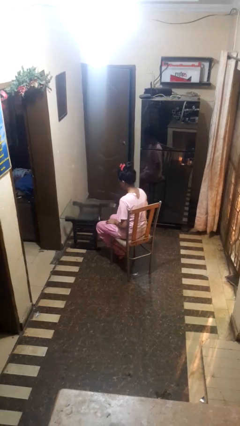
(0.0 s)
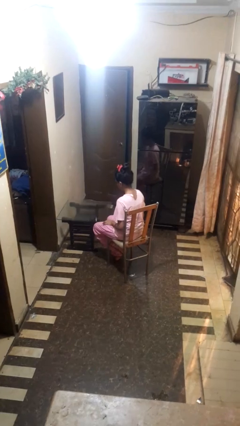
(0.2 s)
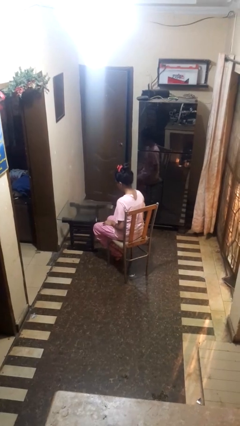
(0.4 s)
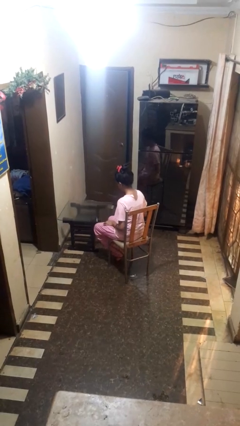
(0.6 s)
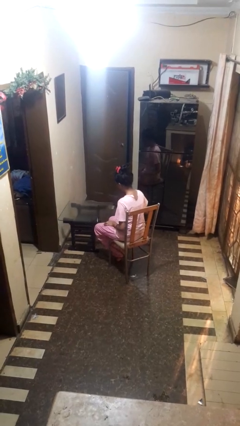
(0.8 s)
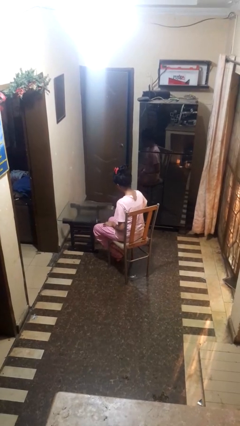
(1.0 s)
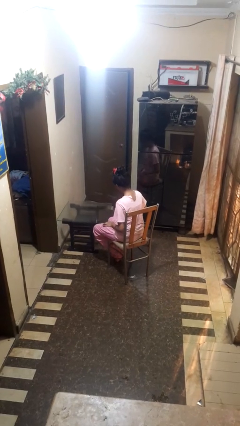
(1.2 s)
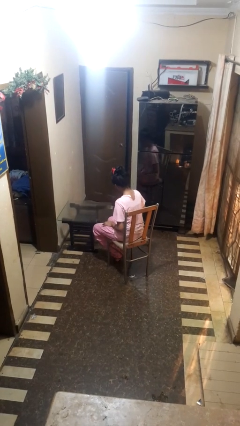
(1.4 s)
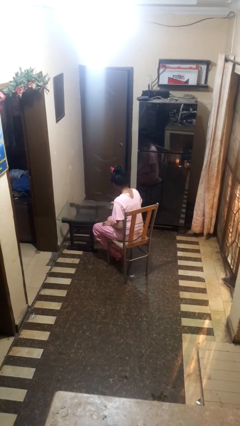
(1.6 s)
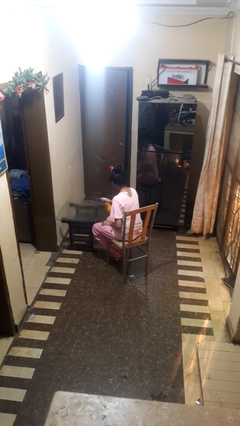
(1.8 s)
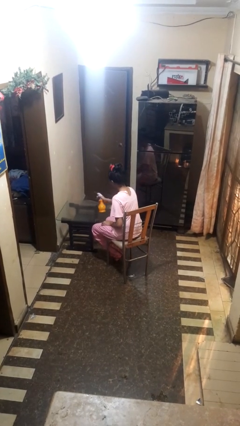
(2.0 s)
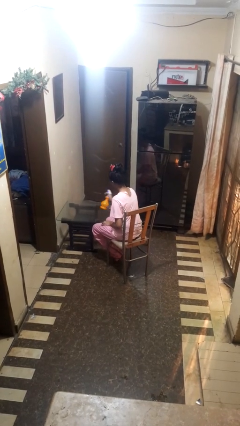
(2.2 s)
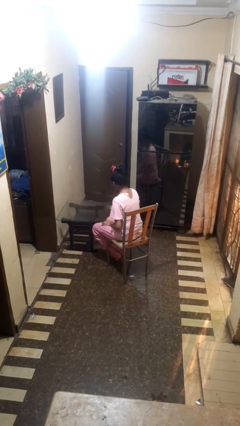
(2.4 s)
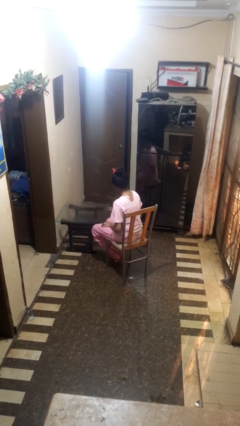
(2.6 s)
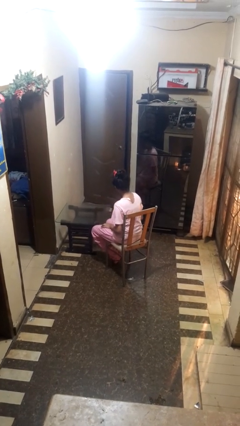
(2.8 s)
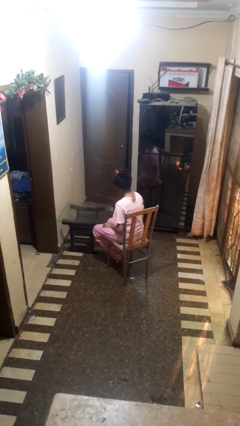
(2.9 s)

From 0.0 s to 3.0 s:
person sprays from bottle

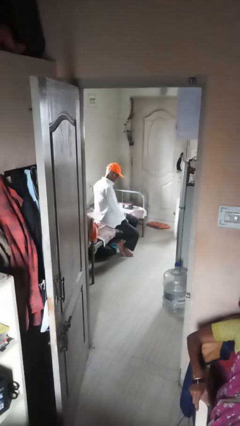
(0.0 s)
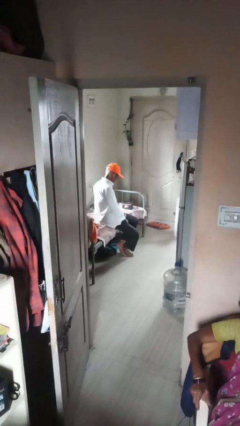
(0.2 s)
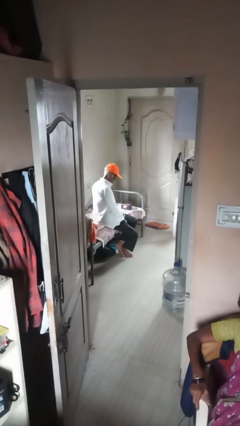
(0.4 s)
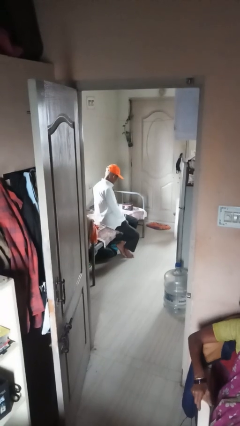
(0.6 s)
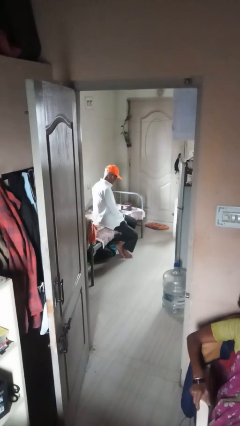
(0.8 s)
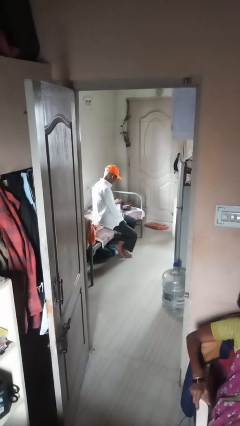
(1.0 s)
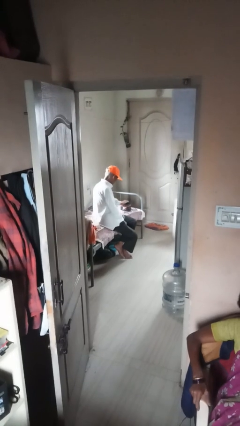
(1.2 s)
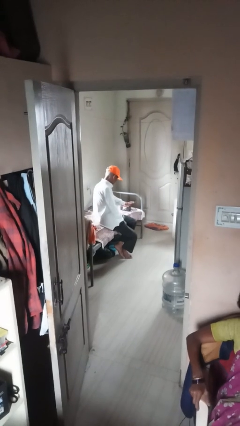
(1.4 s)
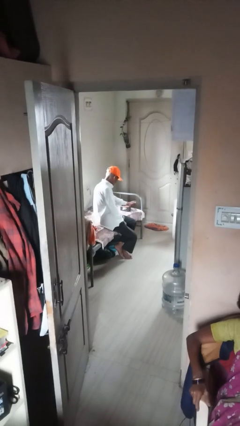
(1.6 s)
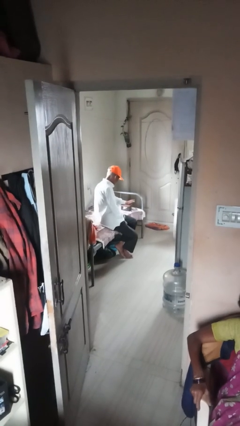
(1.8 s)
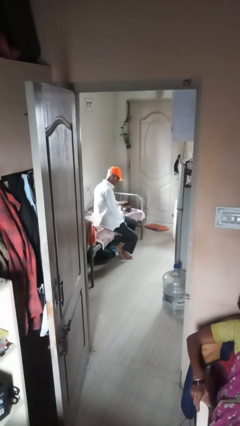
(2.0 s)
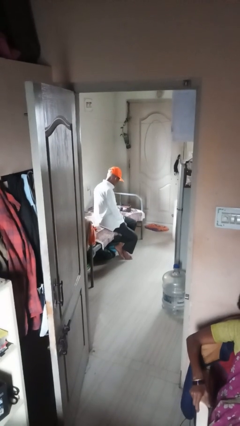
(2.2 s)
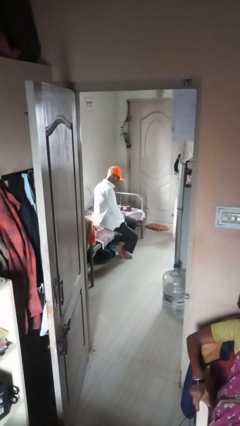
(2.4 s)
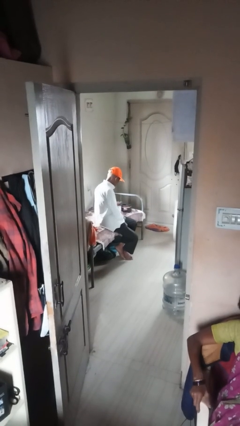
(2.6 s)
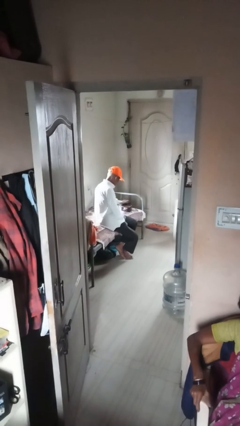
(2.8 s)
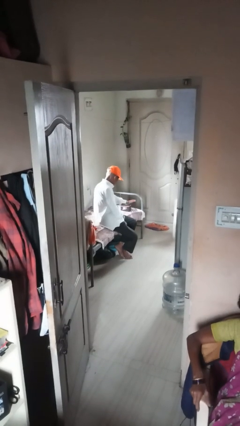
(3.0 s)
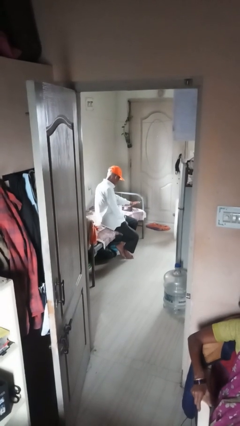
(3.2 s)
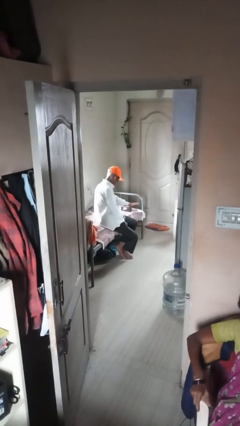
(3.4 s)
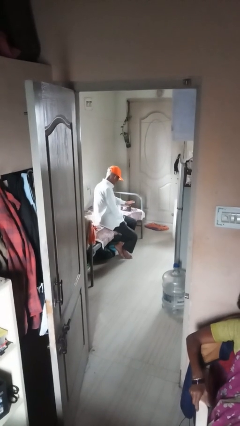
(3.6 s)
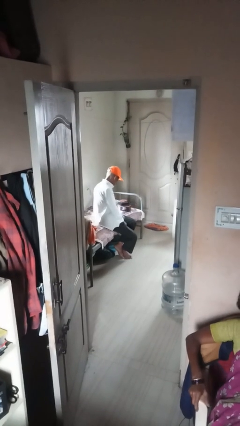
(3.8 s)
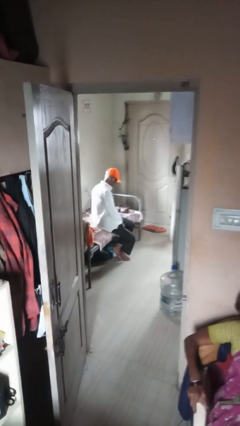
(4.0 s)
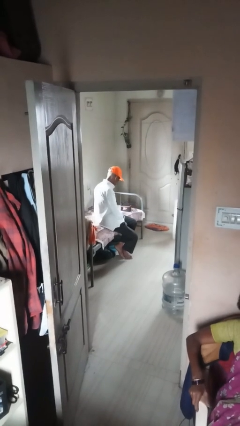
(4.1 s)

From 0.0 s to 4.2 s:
person waves hand over object

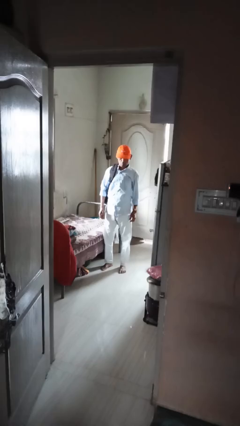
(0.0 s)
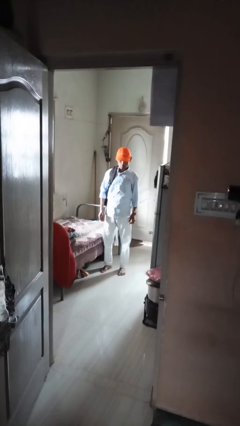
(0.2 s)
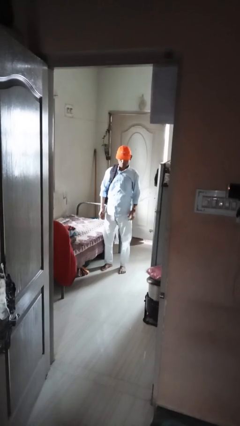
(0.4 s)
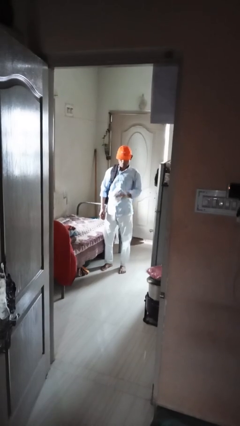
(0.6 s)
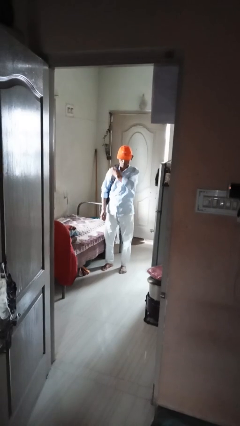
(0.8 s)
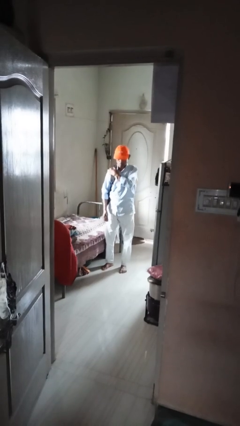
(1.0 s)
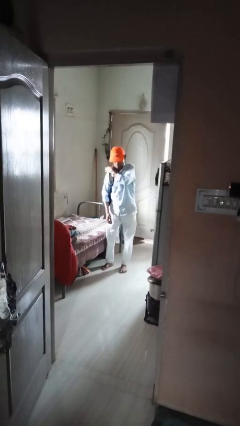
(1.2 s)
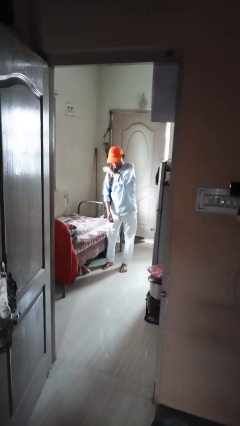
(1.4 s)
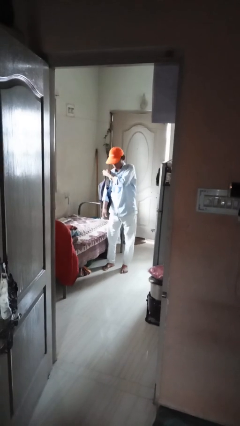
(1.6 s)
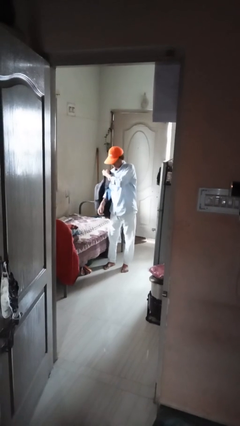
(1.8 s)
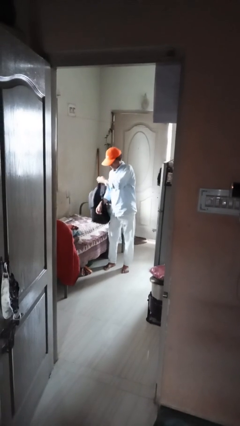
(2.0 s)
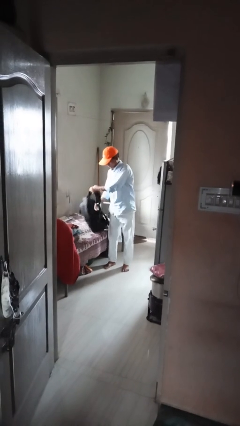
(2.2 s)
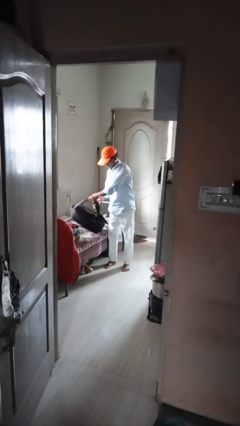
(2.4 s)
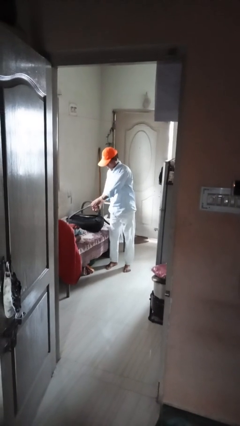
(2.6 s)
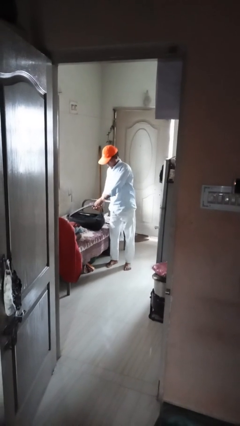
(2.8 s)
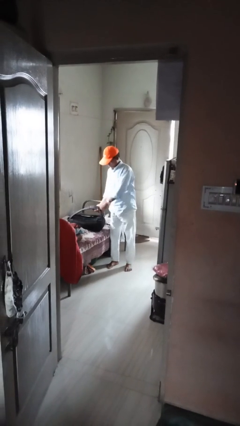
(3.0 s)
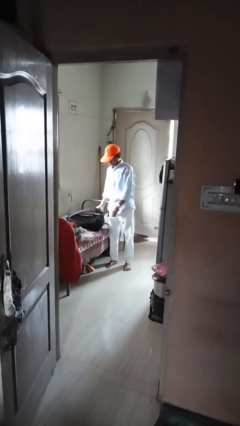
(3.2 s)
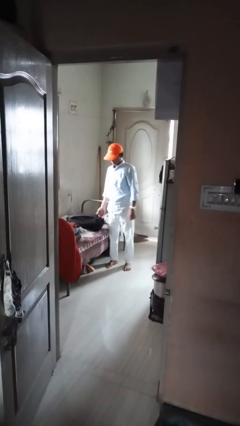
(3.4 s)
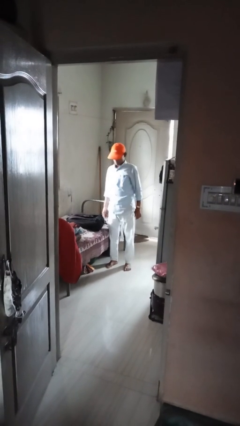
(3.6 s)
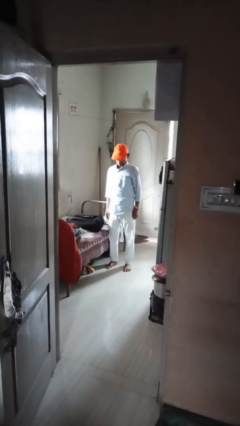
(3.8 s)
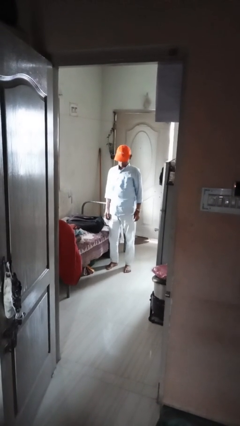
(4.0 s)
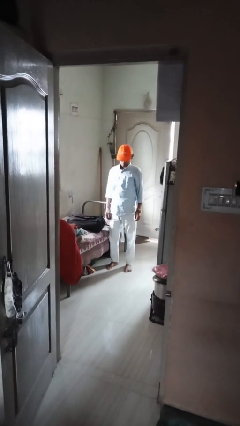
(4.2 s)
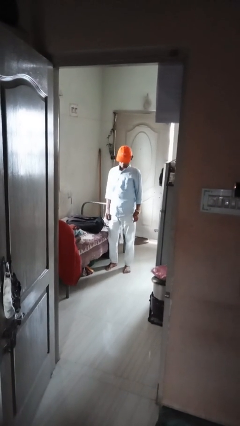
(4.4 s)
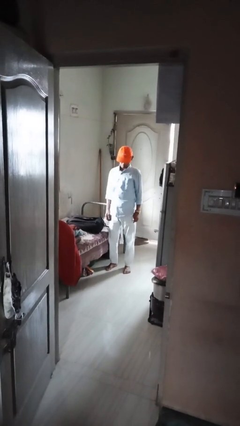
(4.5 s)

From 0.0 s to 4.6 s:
person takes off backpack

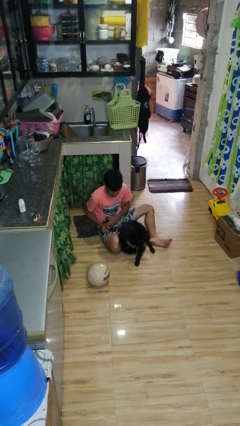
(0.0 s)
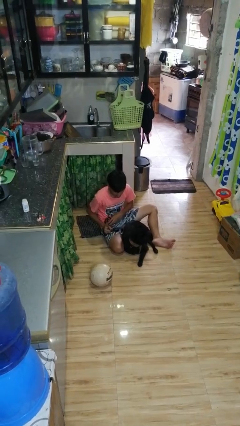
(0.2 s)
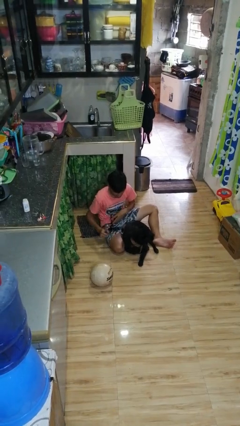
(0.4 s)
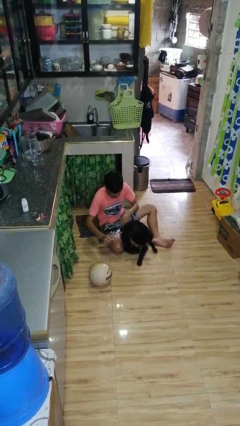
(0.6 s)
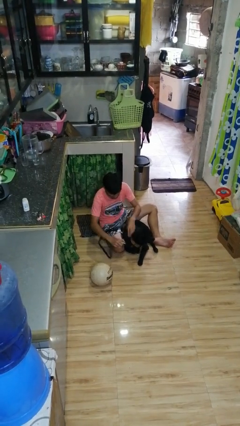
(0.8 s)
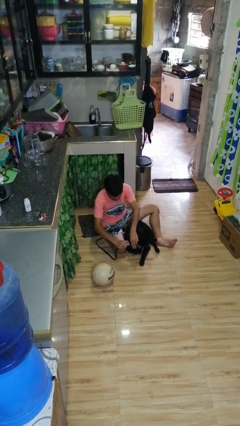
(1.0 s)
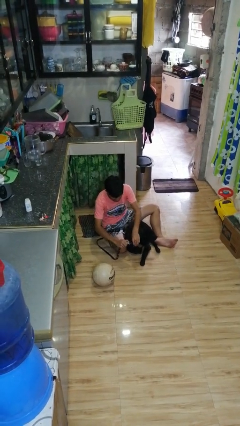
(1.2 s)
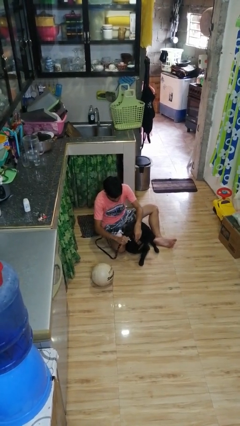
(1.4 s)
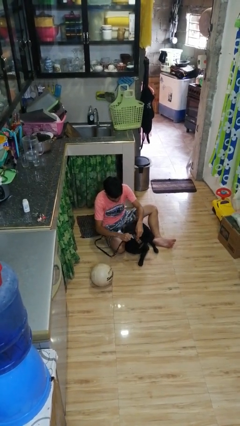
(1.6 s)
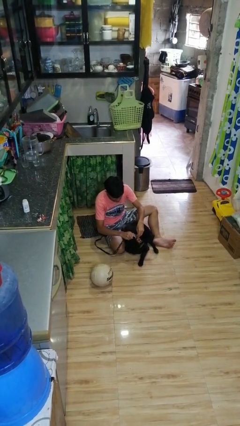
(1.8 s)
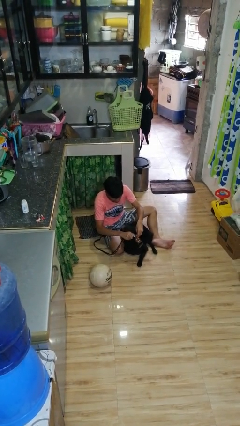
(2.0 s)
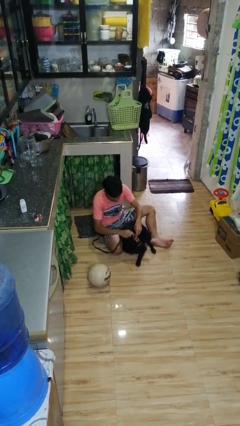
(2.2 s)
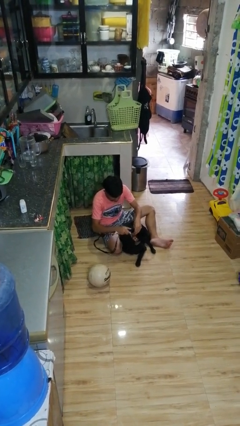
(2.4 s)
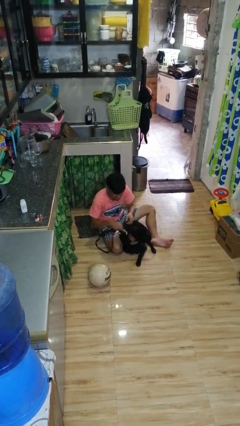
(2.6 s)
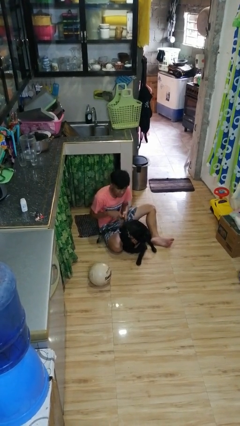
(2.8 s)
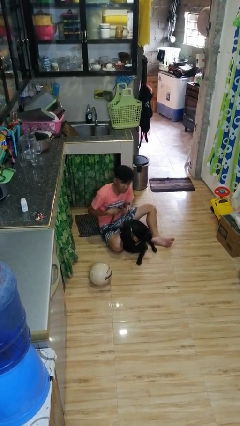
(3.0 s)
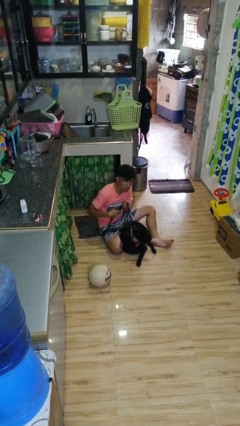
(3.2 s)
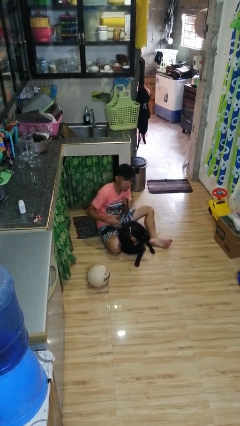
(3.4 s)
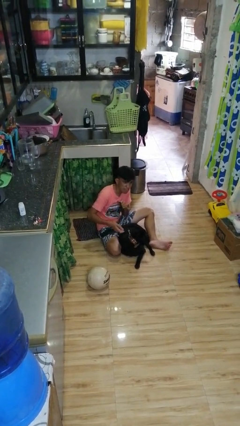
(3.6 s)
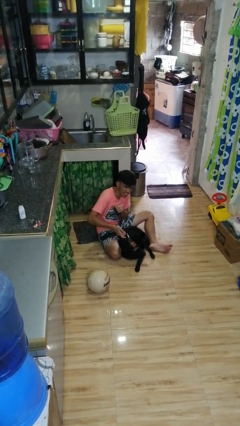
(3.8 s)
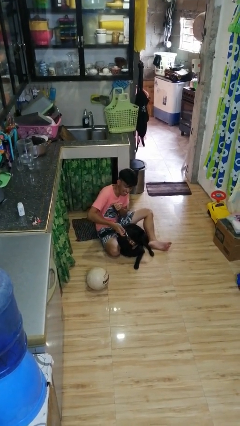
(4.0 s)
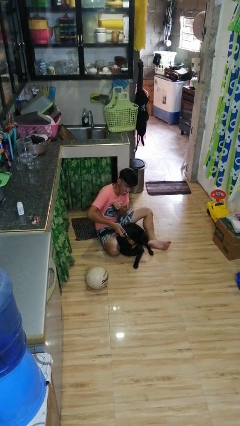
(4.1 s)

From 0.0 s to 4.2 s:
person attaches leash to dog

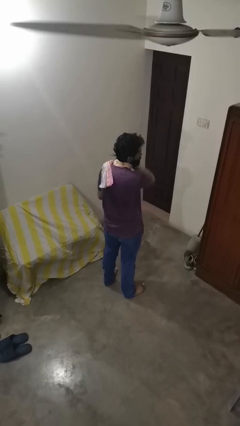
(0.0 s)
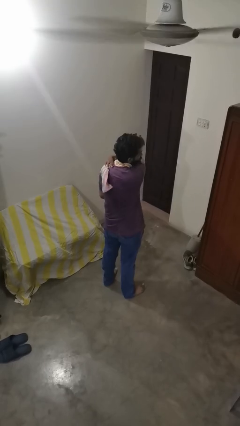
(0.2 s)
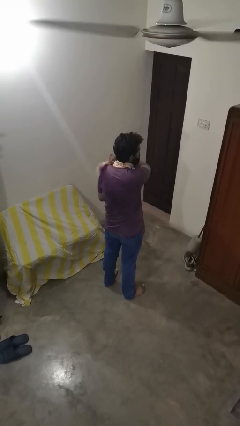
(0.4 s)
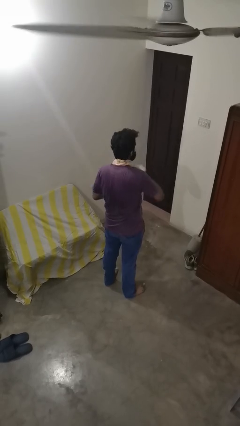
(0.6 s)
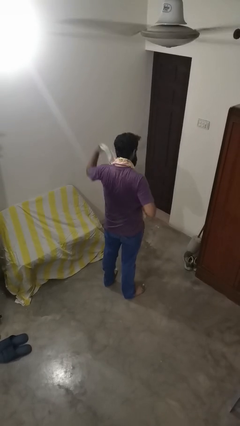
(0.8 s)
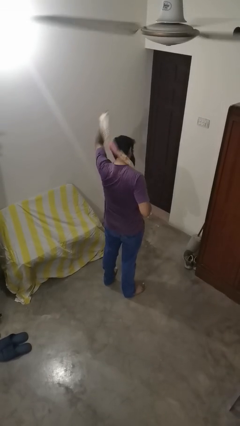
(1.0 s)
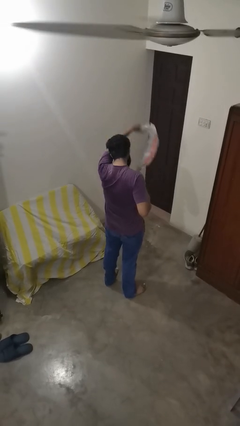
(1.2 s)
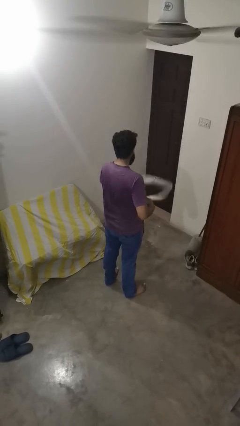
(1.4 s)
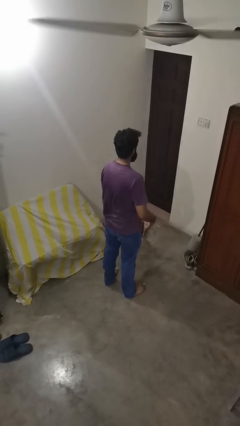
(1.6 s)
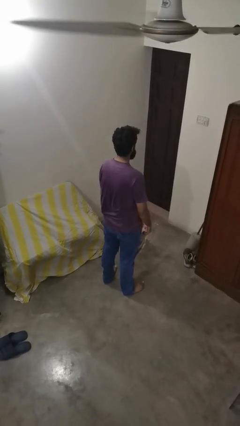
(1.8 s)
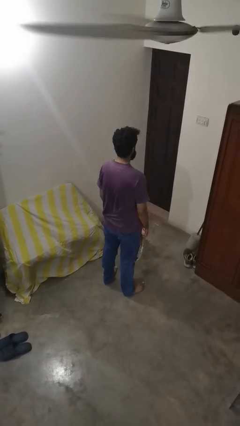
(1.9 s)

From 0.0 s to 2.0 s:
person takes off scarf
